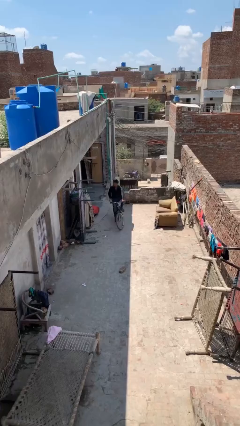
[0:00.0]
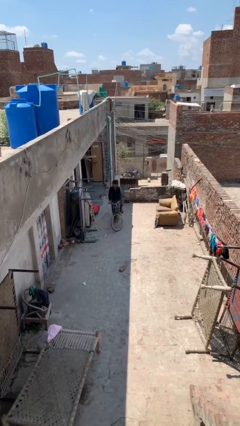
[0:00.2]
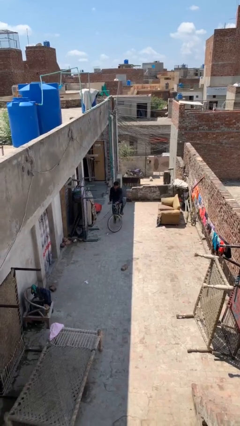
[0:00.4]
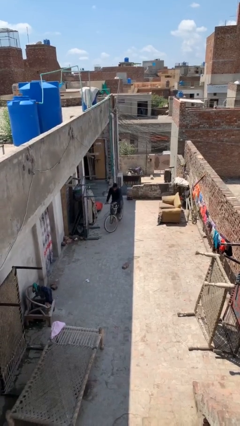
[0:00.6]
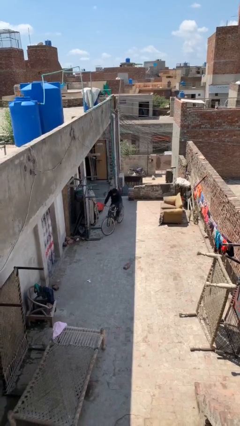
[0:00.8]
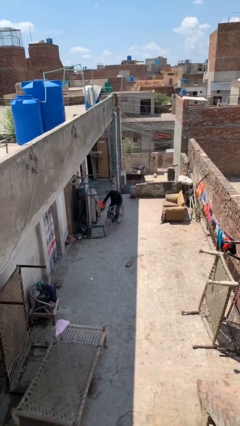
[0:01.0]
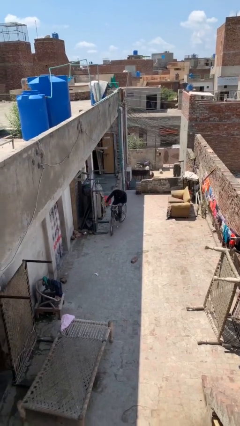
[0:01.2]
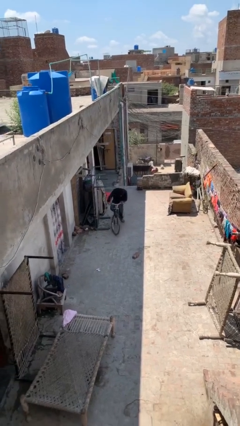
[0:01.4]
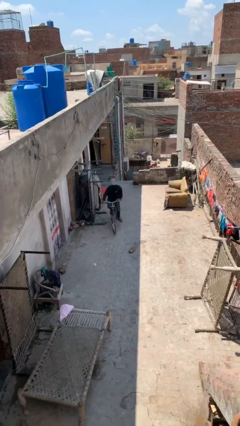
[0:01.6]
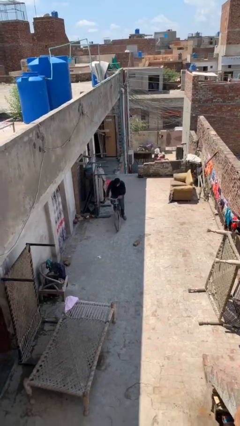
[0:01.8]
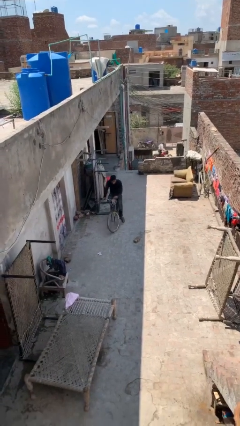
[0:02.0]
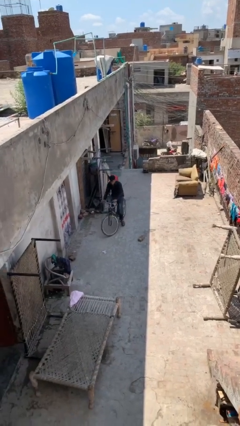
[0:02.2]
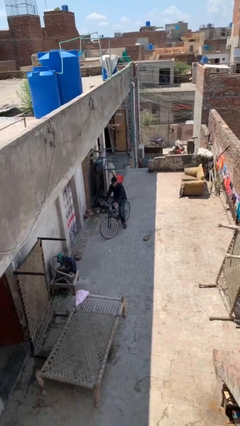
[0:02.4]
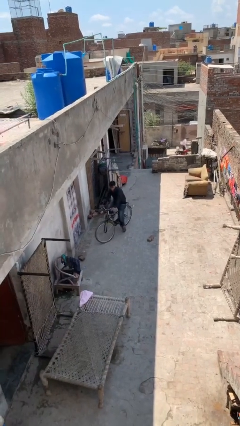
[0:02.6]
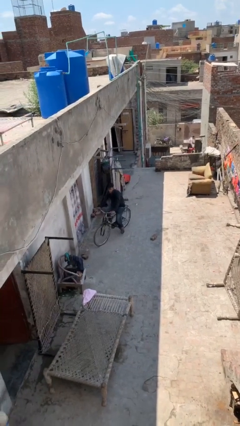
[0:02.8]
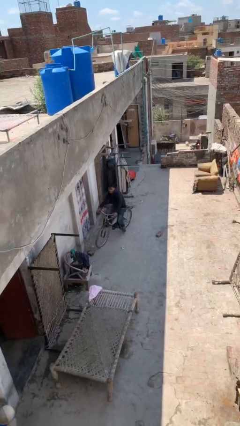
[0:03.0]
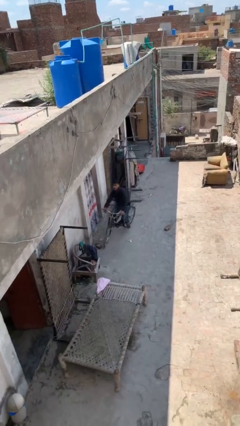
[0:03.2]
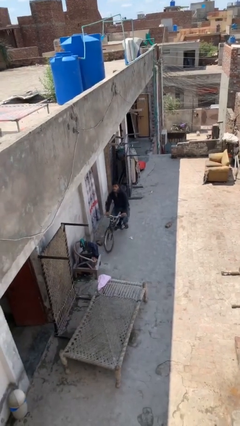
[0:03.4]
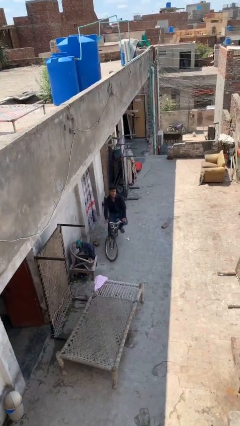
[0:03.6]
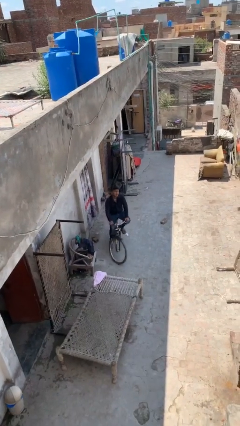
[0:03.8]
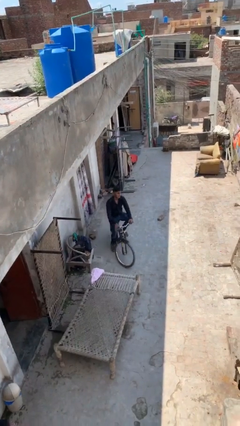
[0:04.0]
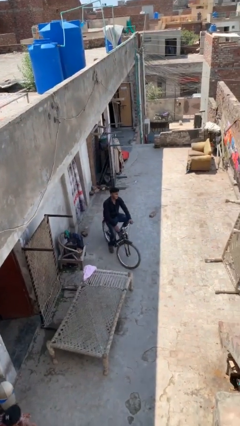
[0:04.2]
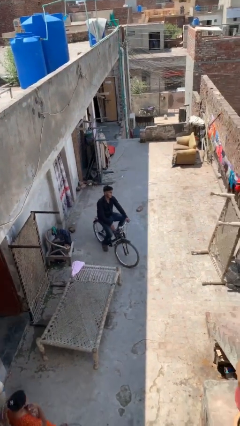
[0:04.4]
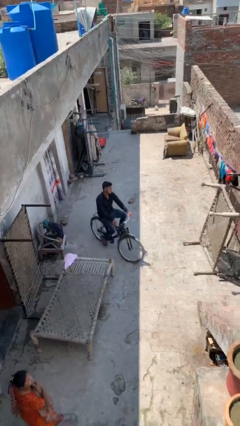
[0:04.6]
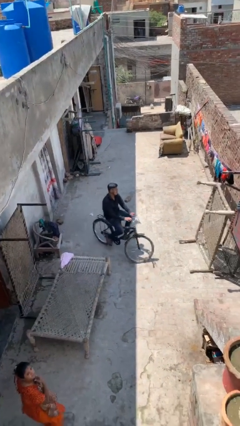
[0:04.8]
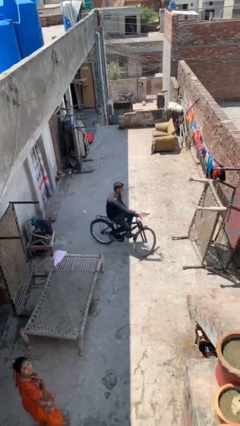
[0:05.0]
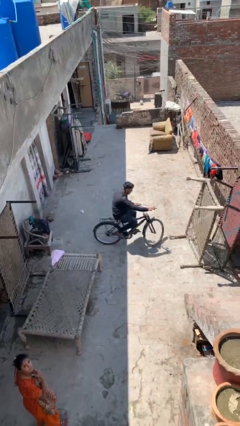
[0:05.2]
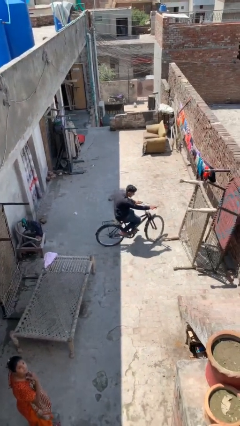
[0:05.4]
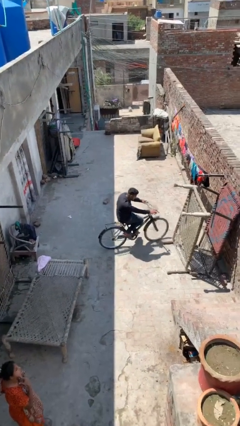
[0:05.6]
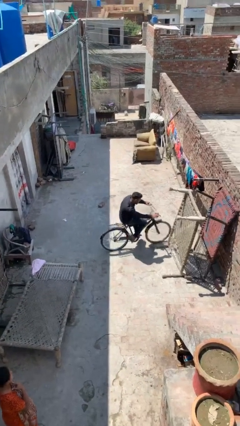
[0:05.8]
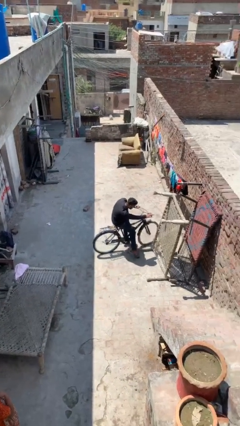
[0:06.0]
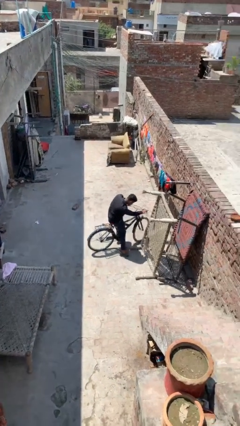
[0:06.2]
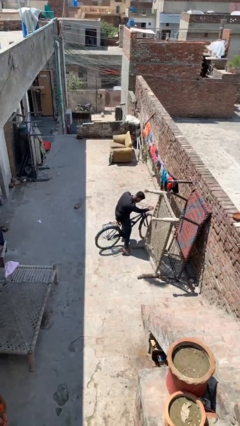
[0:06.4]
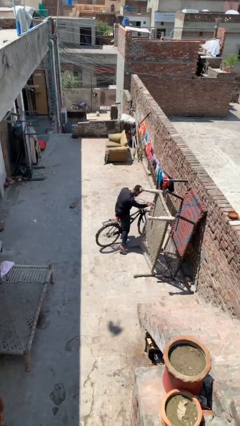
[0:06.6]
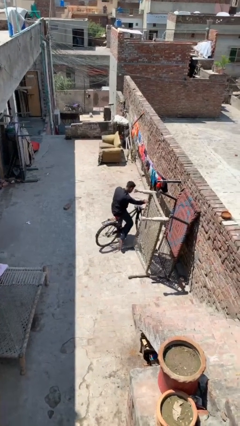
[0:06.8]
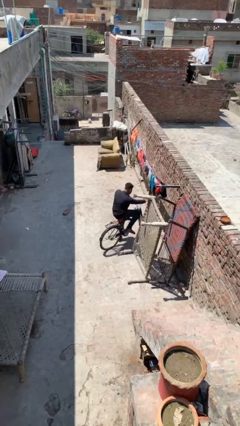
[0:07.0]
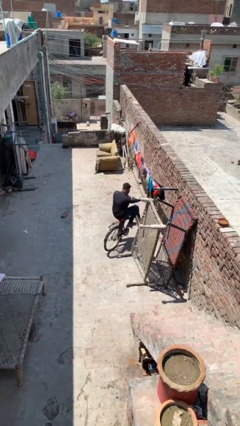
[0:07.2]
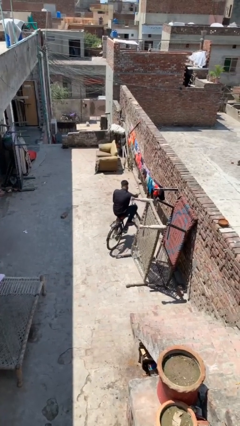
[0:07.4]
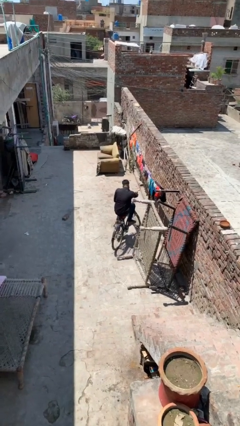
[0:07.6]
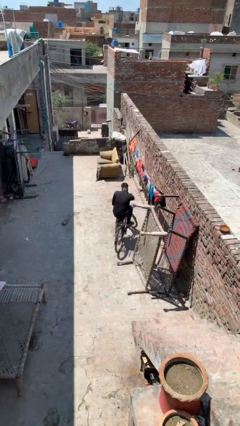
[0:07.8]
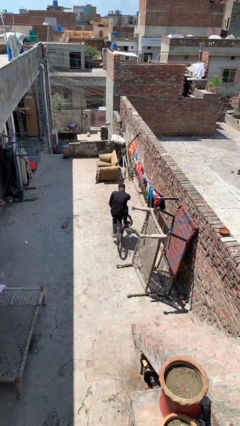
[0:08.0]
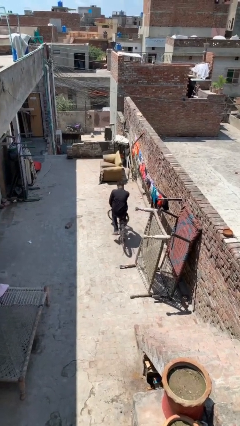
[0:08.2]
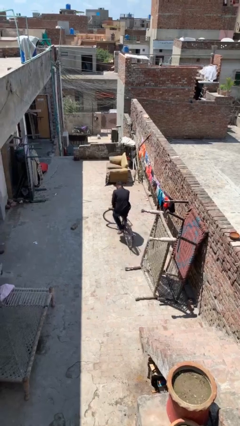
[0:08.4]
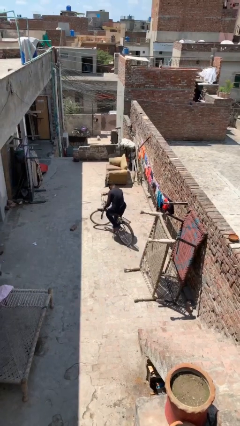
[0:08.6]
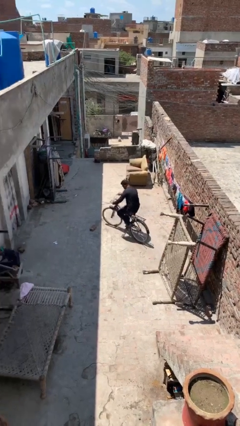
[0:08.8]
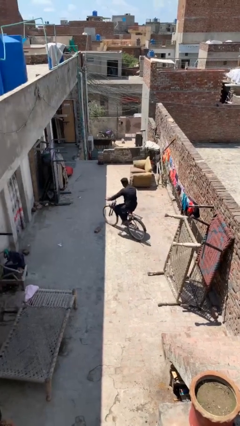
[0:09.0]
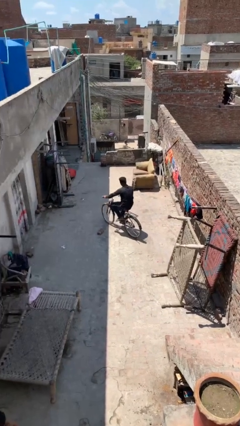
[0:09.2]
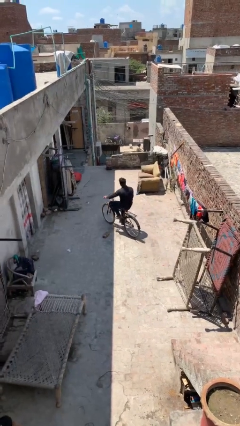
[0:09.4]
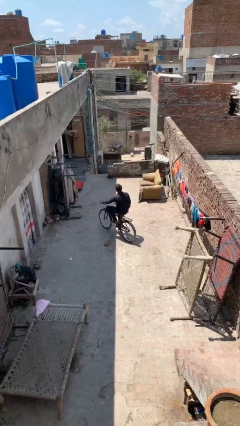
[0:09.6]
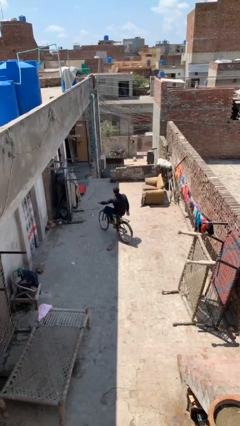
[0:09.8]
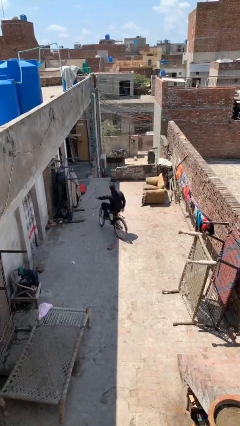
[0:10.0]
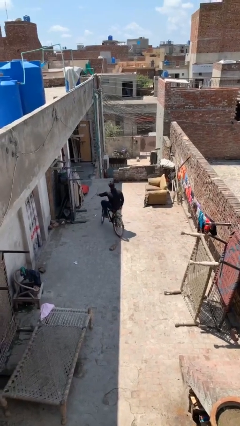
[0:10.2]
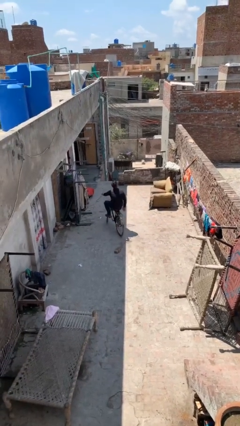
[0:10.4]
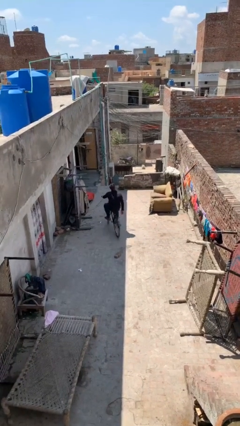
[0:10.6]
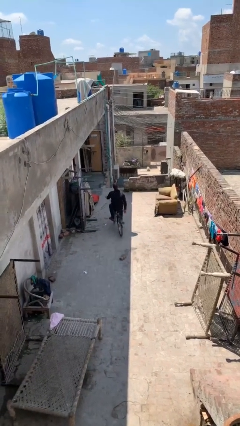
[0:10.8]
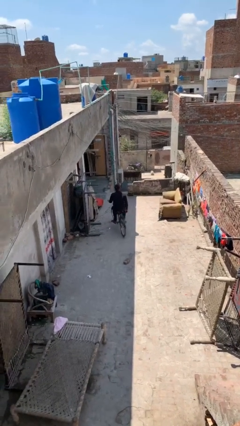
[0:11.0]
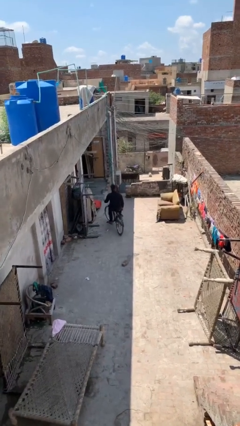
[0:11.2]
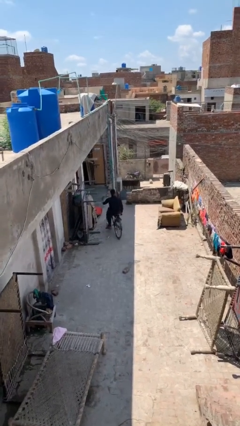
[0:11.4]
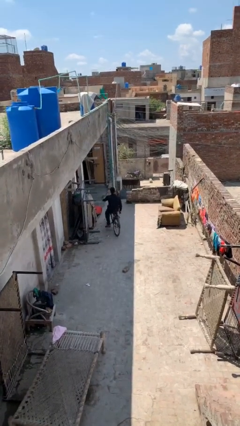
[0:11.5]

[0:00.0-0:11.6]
person rides bicycle

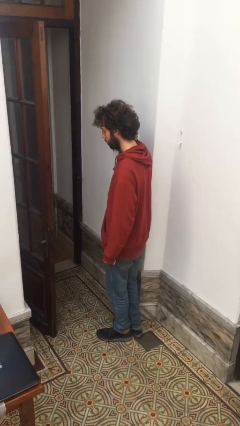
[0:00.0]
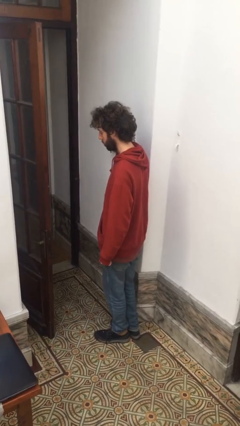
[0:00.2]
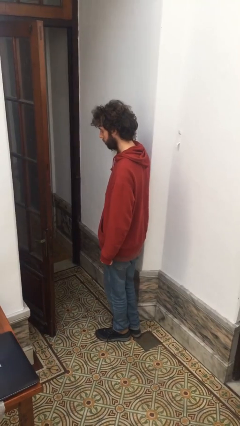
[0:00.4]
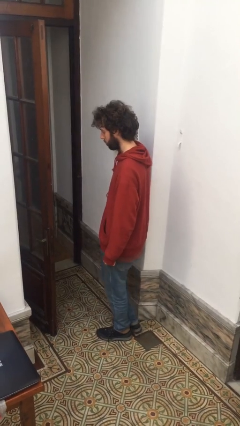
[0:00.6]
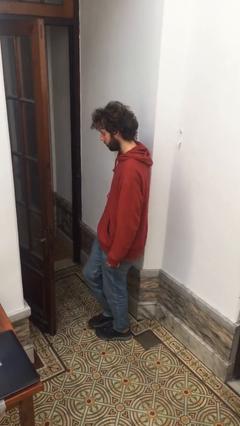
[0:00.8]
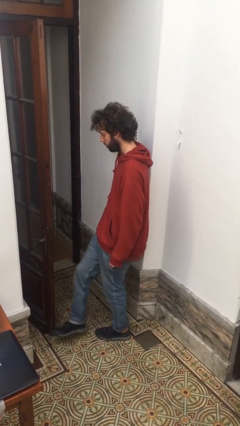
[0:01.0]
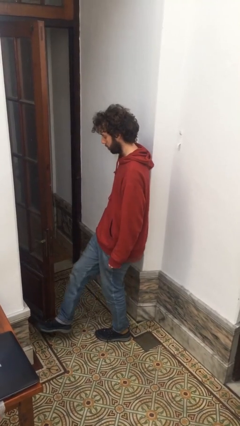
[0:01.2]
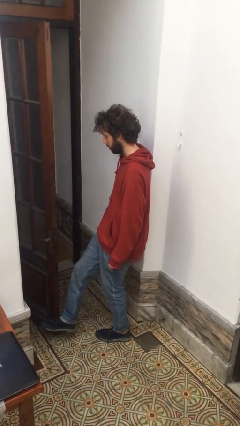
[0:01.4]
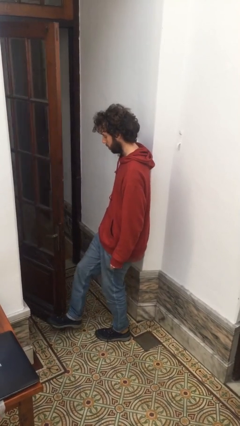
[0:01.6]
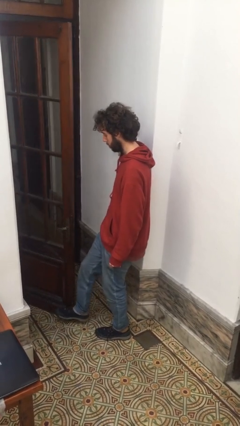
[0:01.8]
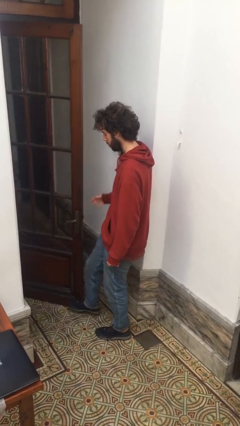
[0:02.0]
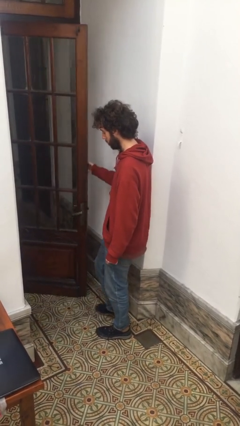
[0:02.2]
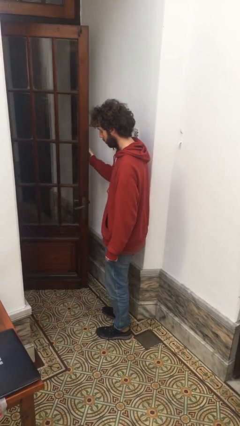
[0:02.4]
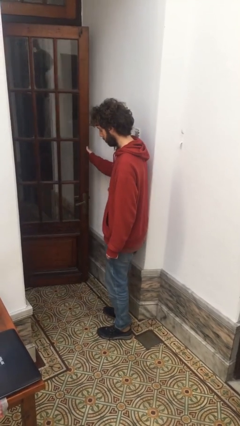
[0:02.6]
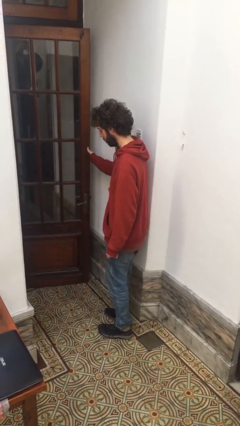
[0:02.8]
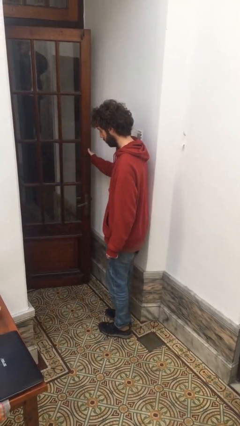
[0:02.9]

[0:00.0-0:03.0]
person closes door with foot

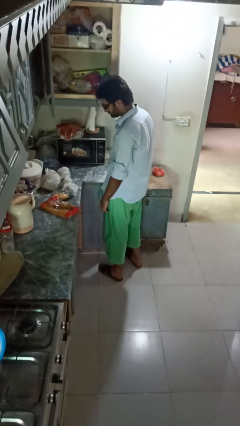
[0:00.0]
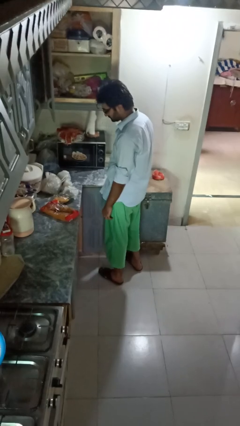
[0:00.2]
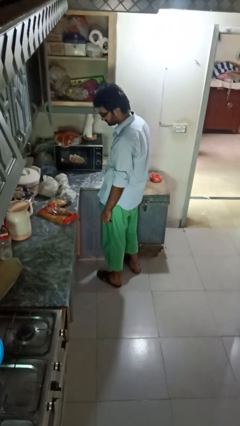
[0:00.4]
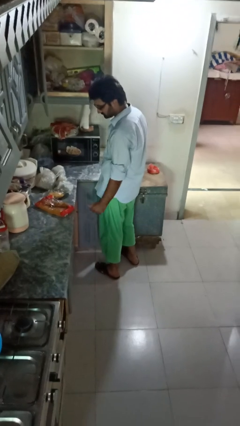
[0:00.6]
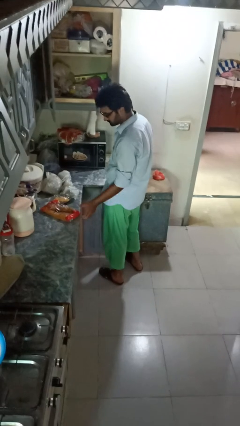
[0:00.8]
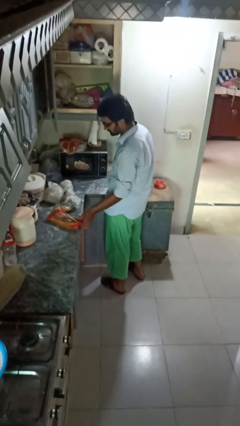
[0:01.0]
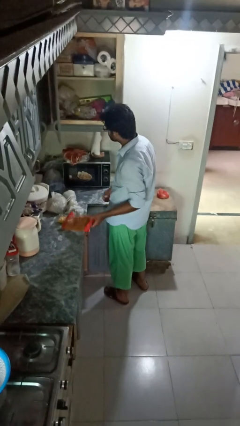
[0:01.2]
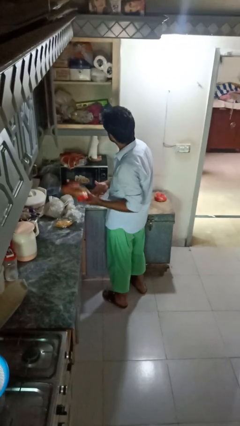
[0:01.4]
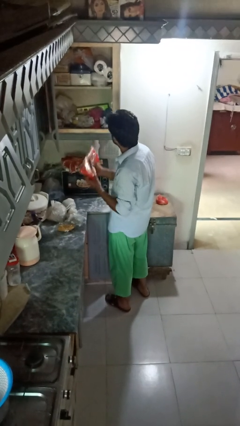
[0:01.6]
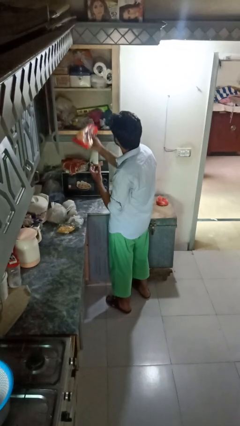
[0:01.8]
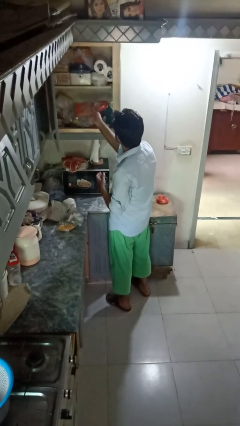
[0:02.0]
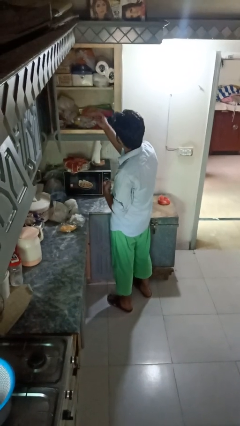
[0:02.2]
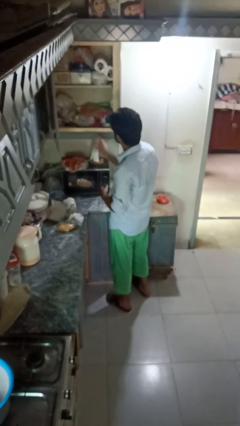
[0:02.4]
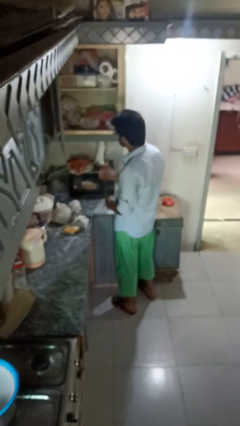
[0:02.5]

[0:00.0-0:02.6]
person loads groceries into cabinet

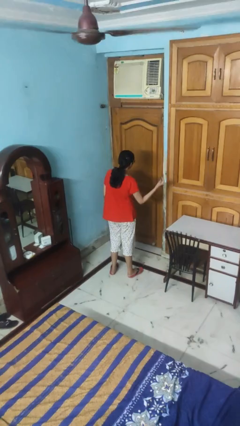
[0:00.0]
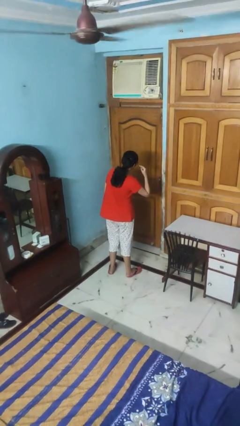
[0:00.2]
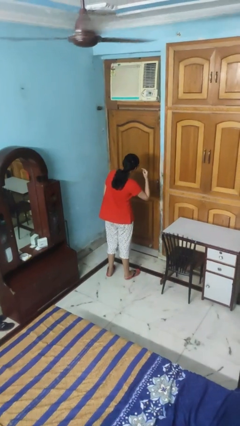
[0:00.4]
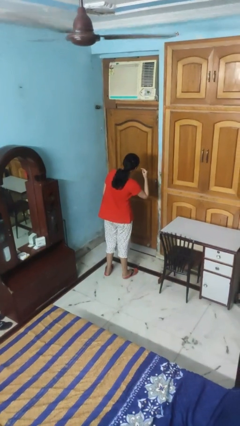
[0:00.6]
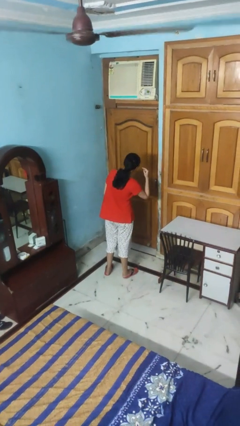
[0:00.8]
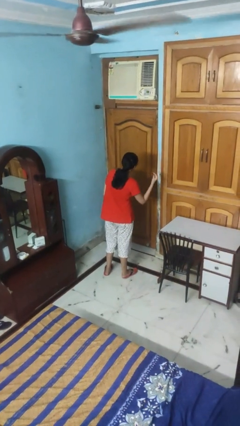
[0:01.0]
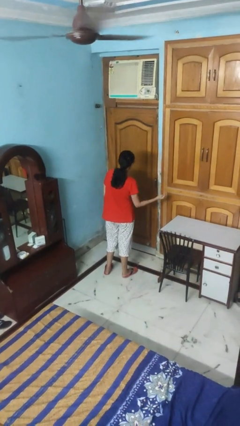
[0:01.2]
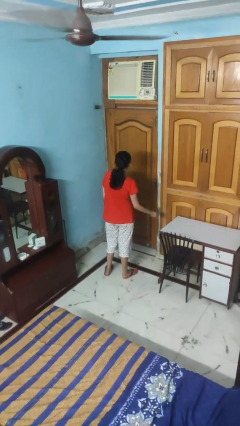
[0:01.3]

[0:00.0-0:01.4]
person gestures listen closely
